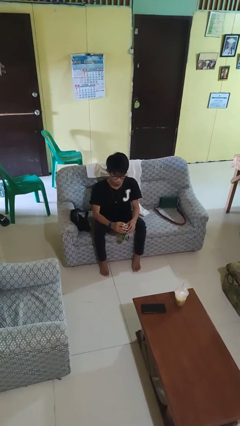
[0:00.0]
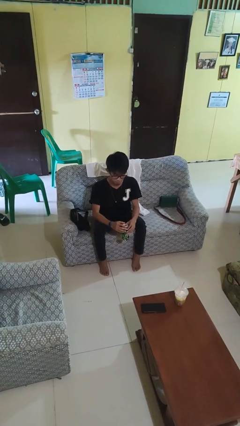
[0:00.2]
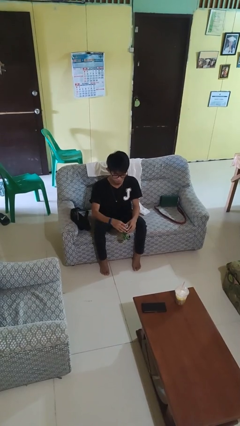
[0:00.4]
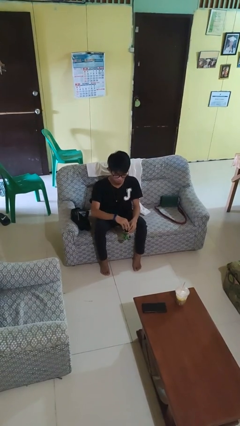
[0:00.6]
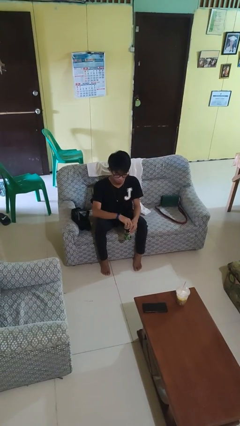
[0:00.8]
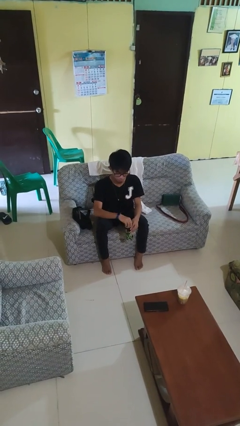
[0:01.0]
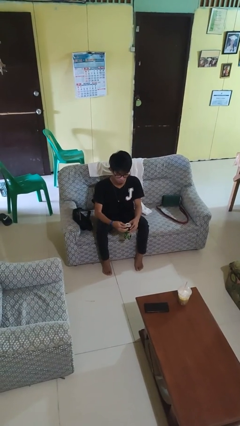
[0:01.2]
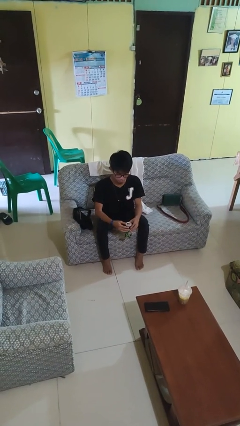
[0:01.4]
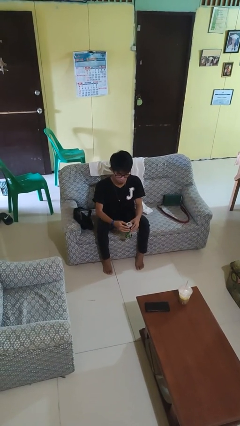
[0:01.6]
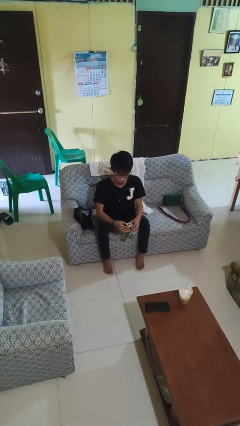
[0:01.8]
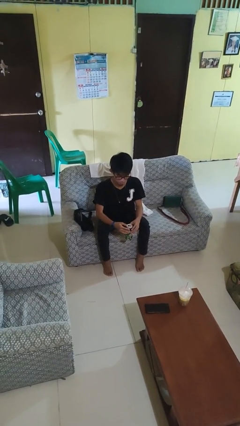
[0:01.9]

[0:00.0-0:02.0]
person opens beverage can

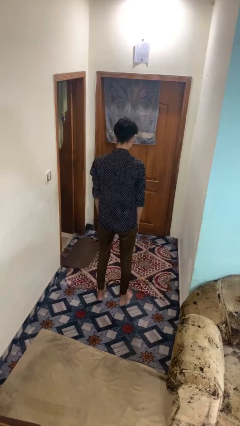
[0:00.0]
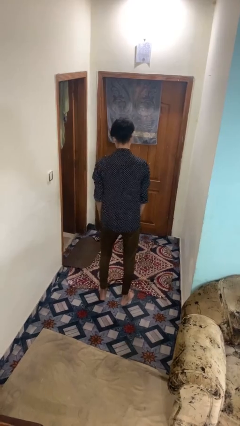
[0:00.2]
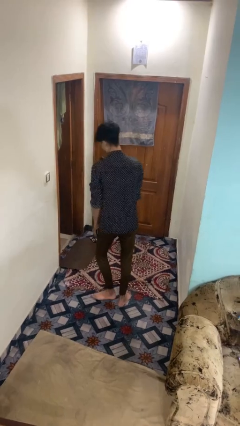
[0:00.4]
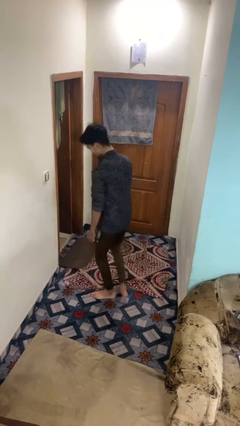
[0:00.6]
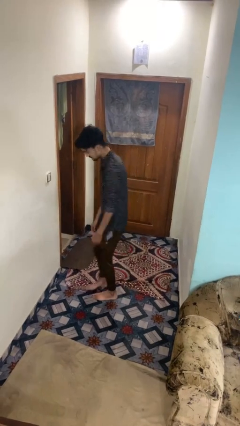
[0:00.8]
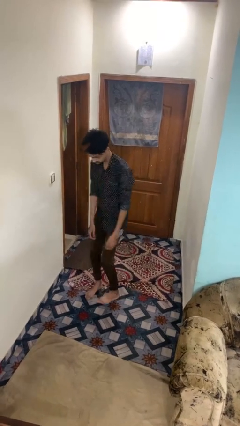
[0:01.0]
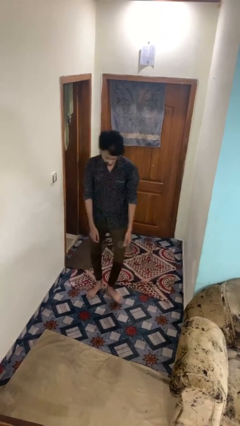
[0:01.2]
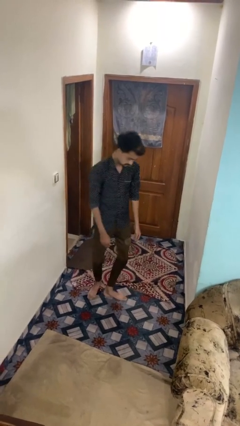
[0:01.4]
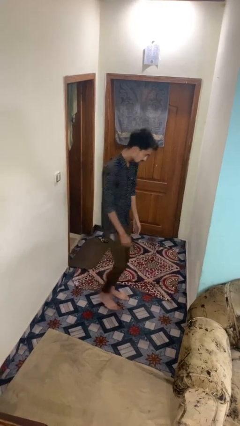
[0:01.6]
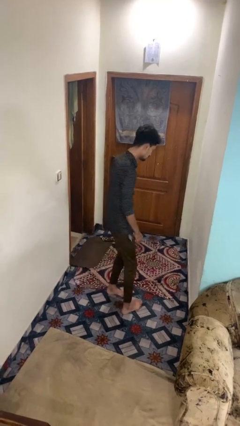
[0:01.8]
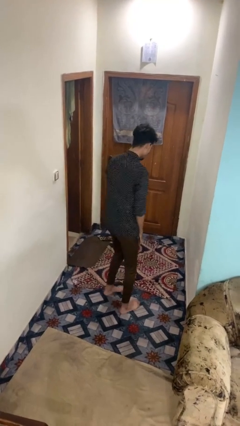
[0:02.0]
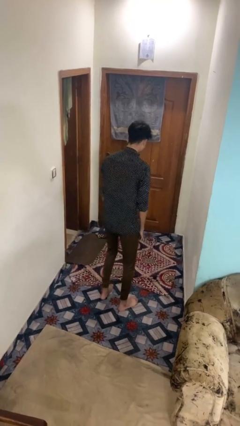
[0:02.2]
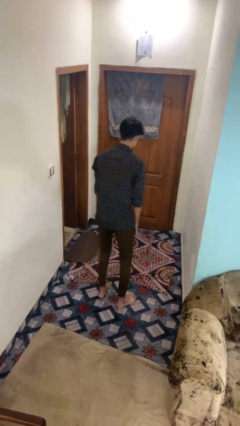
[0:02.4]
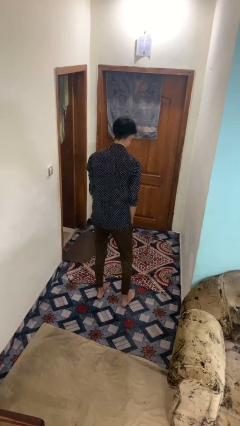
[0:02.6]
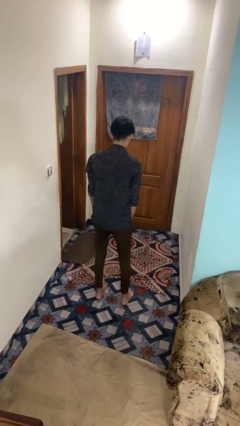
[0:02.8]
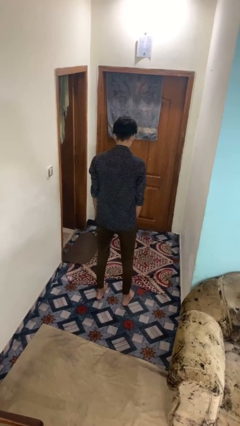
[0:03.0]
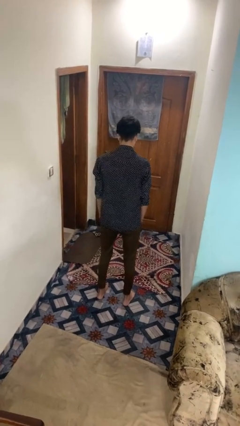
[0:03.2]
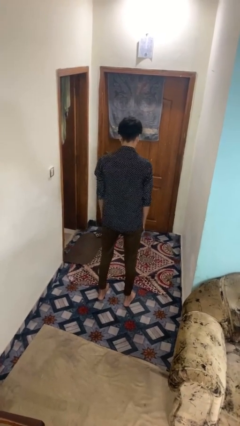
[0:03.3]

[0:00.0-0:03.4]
person twirls

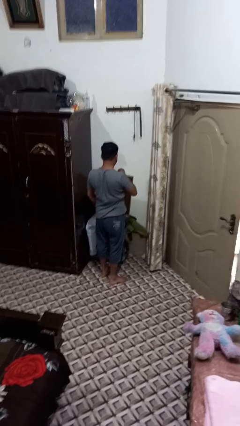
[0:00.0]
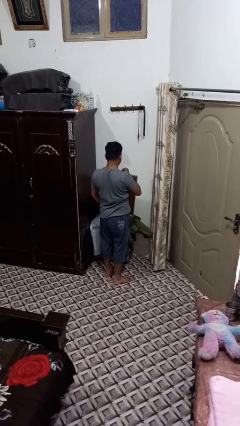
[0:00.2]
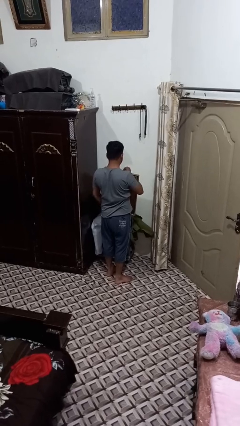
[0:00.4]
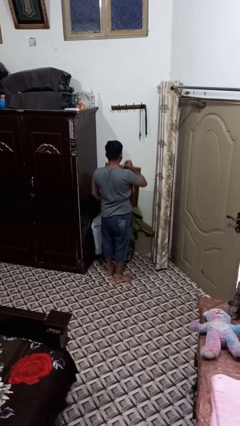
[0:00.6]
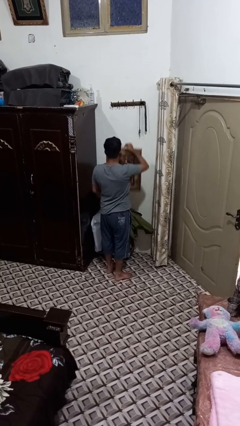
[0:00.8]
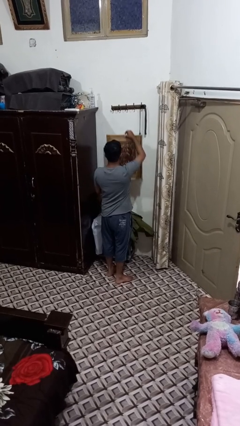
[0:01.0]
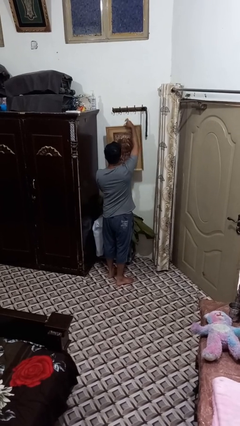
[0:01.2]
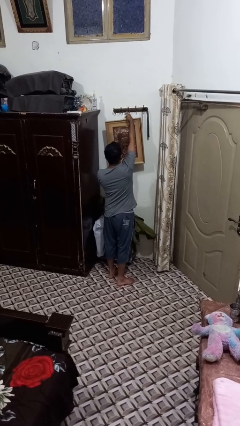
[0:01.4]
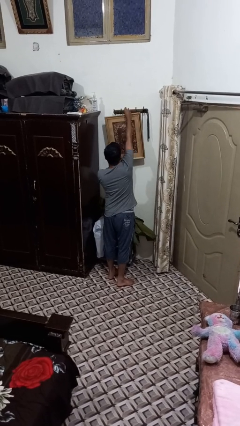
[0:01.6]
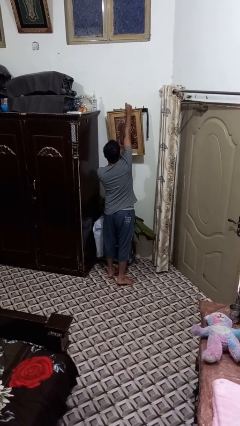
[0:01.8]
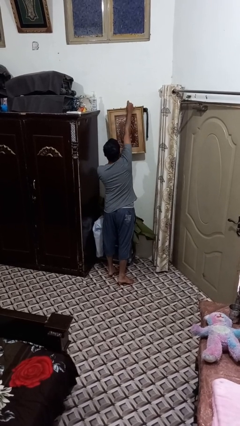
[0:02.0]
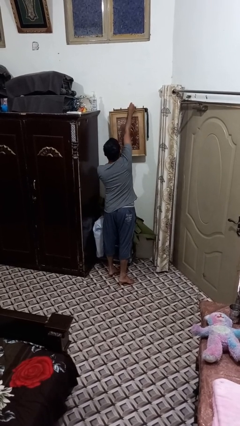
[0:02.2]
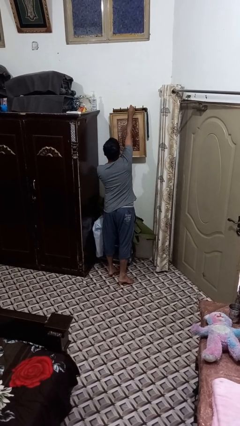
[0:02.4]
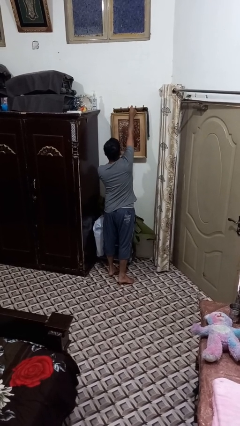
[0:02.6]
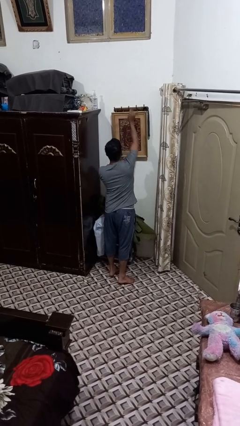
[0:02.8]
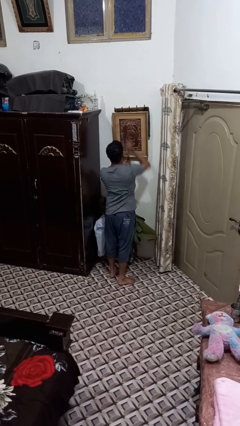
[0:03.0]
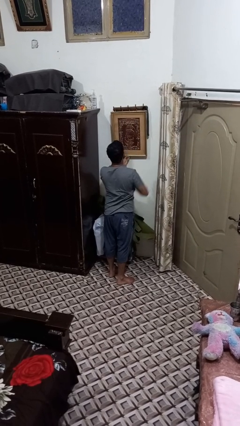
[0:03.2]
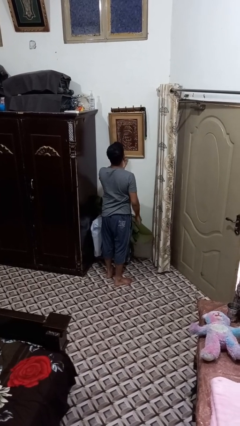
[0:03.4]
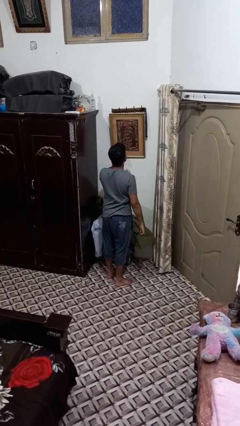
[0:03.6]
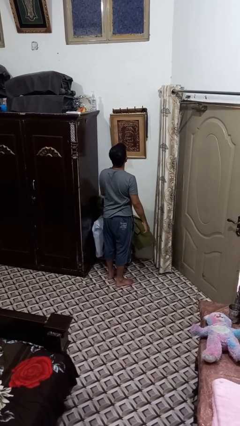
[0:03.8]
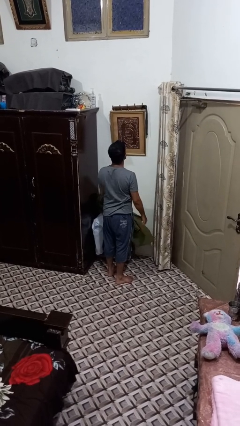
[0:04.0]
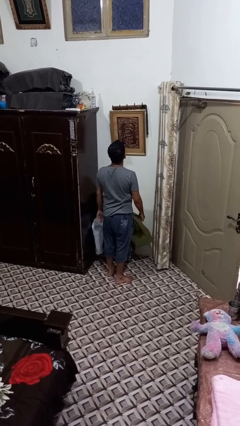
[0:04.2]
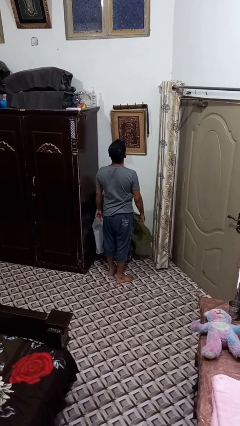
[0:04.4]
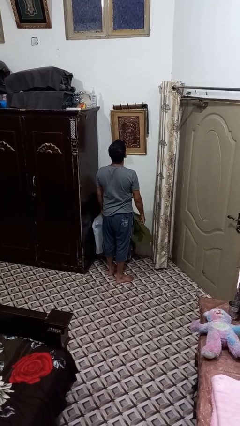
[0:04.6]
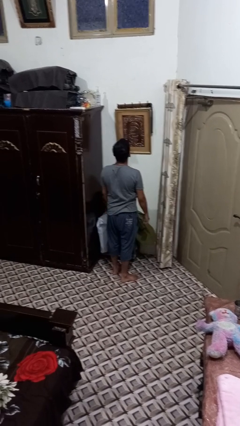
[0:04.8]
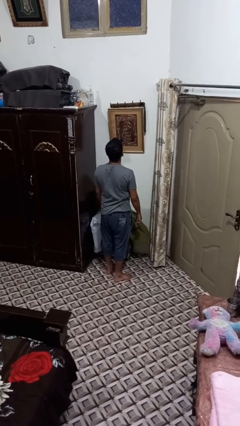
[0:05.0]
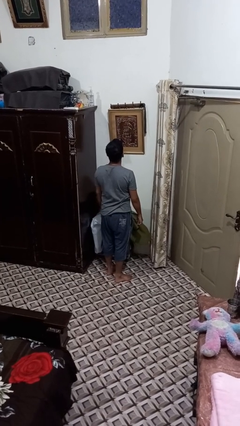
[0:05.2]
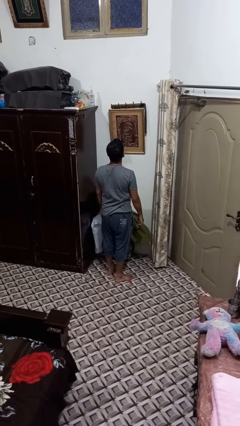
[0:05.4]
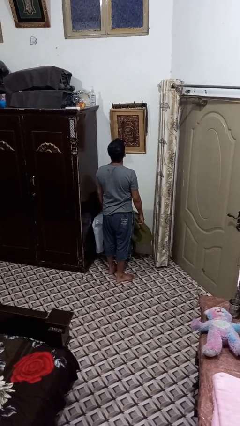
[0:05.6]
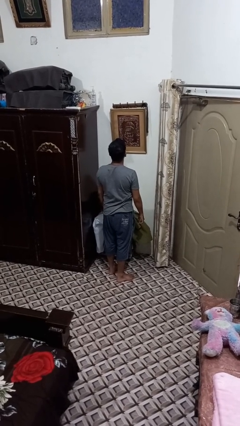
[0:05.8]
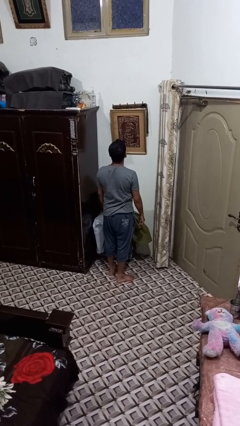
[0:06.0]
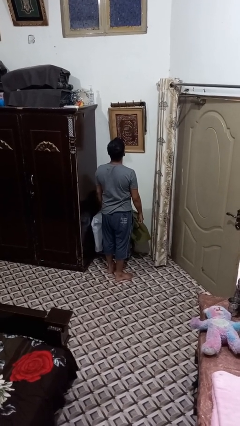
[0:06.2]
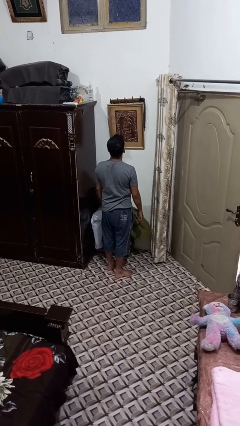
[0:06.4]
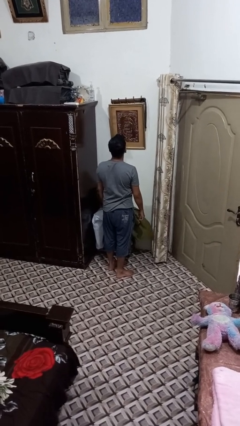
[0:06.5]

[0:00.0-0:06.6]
person puts up picture frame

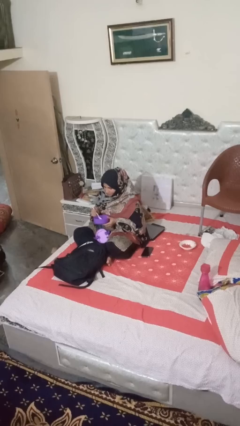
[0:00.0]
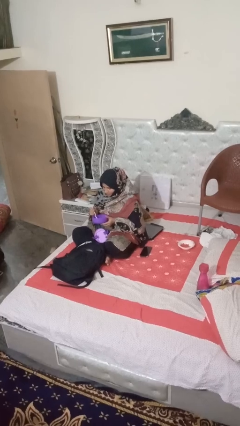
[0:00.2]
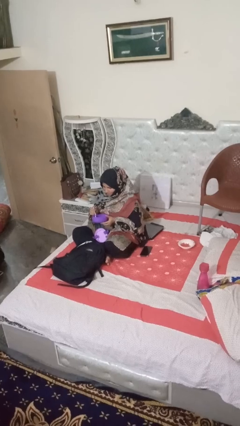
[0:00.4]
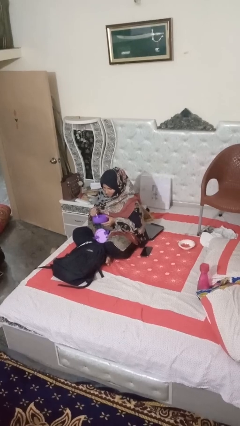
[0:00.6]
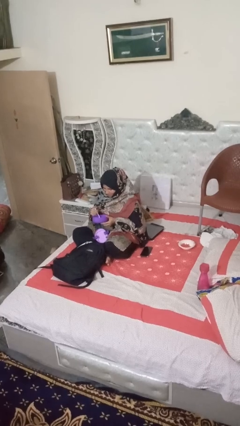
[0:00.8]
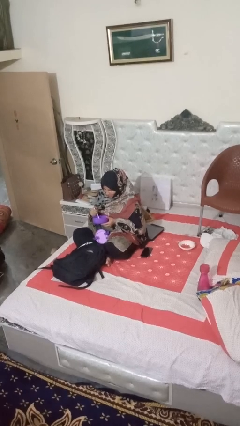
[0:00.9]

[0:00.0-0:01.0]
person eats snack from bag

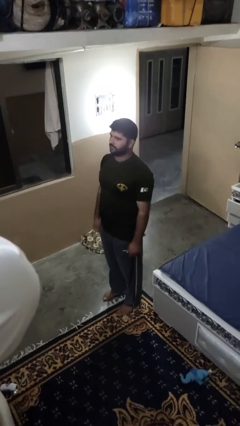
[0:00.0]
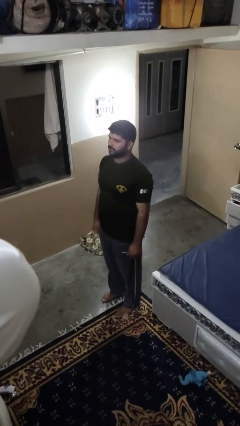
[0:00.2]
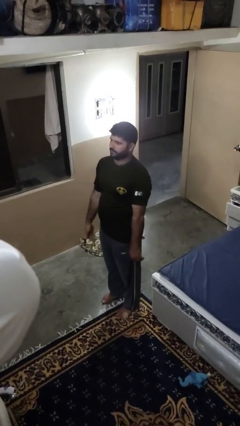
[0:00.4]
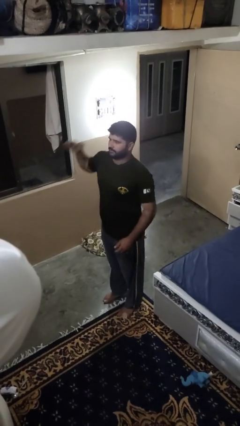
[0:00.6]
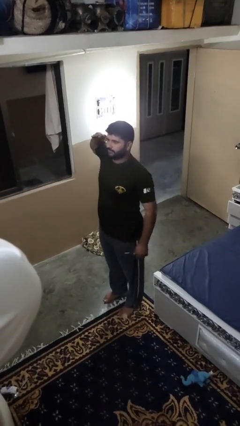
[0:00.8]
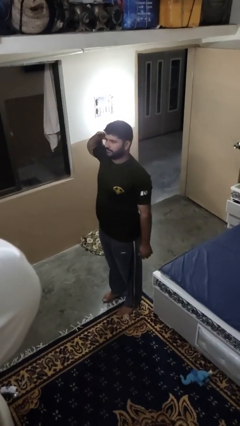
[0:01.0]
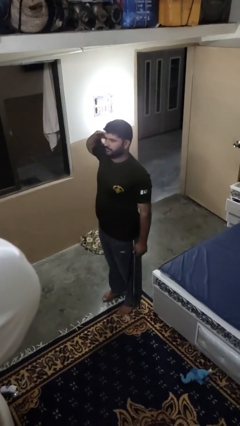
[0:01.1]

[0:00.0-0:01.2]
person salutes

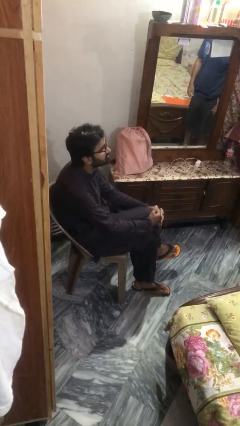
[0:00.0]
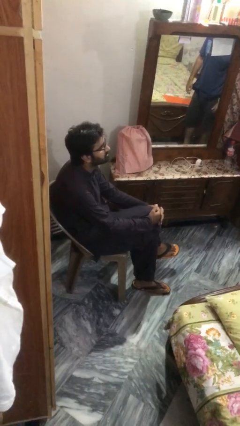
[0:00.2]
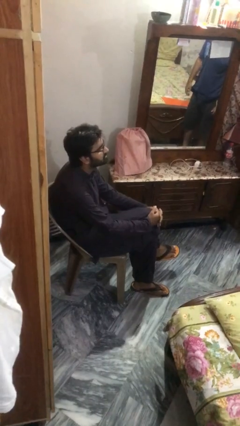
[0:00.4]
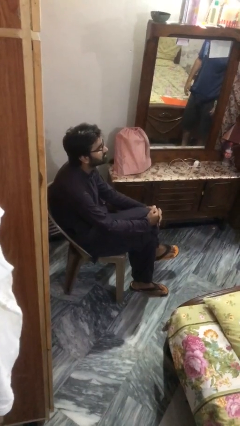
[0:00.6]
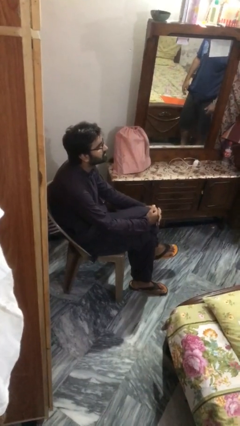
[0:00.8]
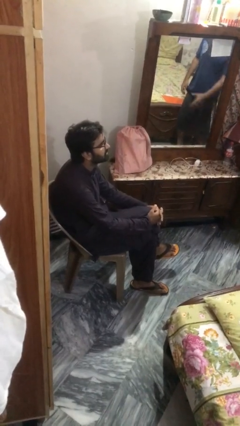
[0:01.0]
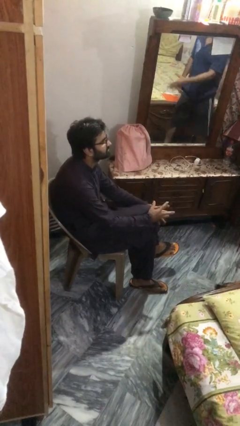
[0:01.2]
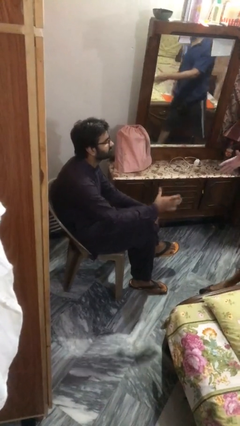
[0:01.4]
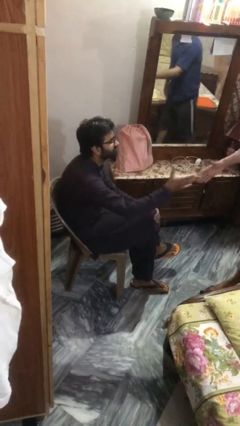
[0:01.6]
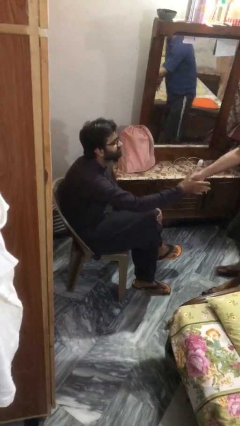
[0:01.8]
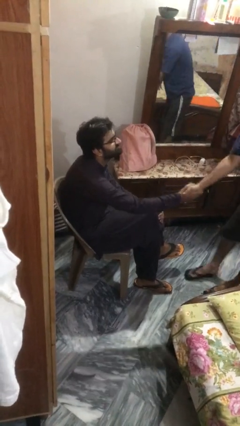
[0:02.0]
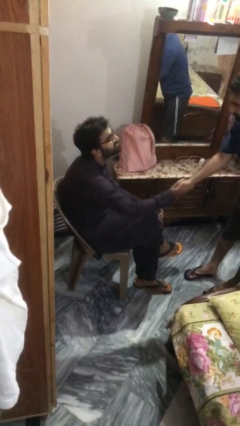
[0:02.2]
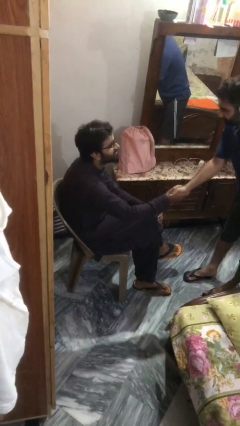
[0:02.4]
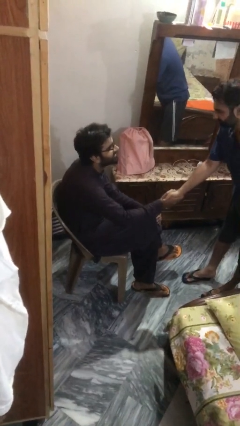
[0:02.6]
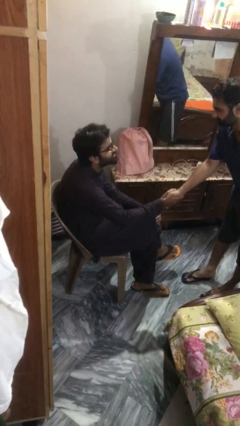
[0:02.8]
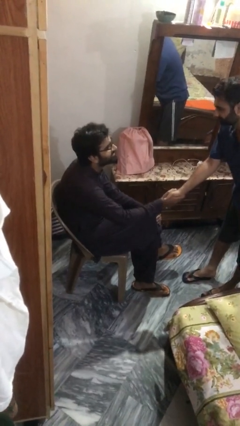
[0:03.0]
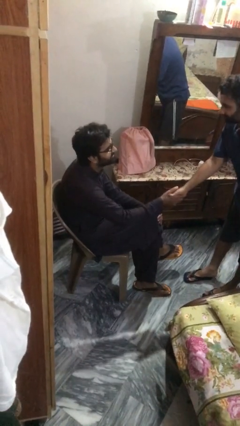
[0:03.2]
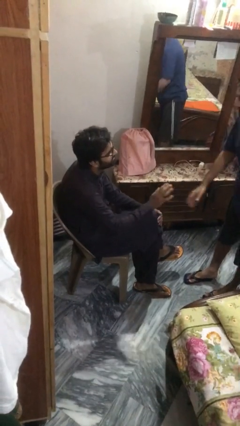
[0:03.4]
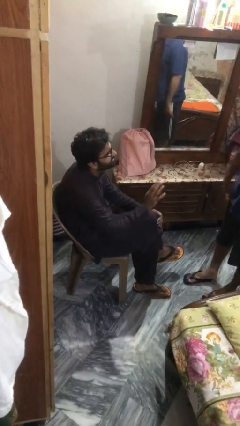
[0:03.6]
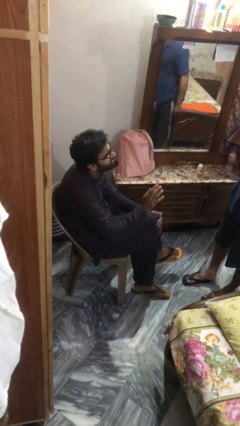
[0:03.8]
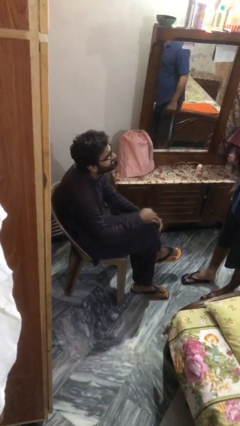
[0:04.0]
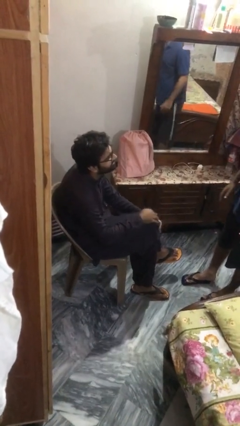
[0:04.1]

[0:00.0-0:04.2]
person shakes hand
